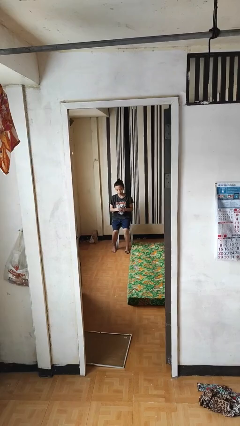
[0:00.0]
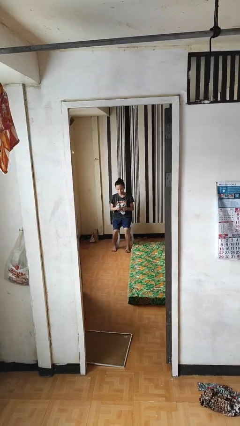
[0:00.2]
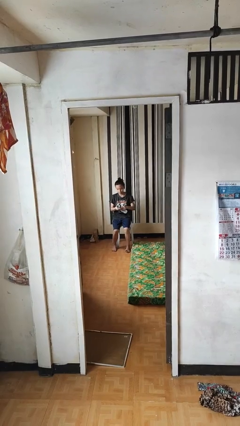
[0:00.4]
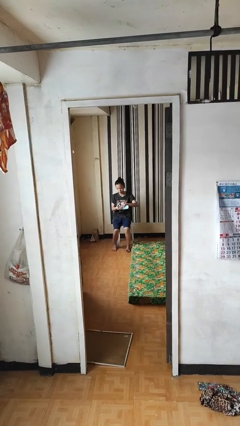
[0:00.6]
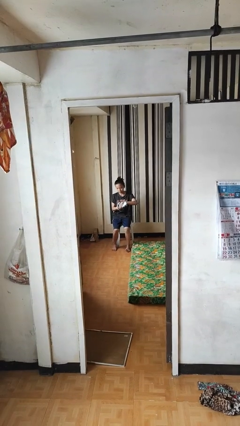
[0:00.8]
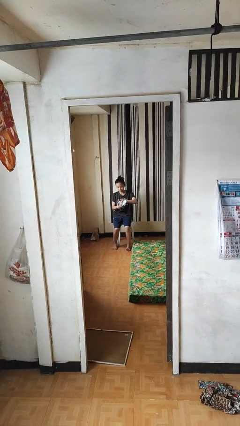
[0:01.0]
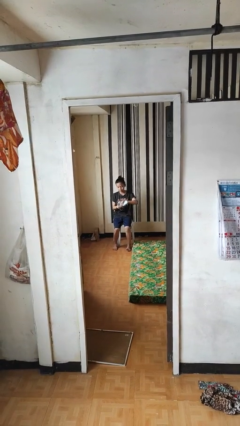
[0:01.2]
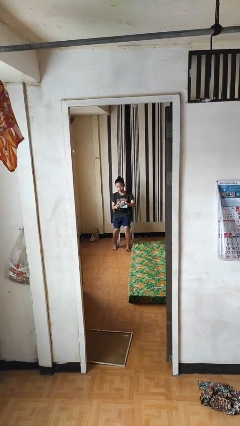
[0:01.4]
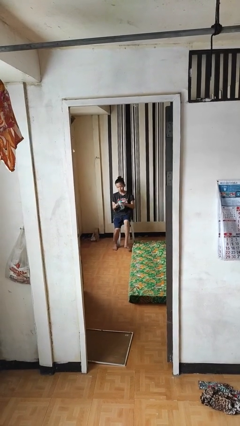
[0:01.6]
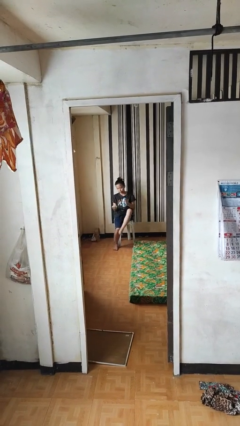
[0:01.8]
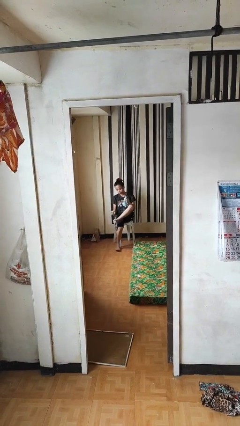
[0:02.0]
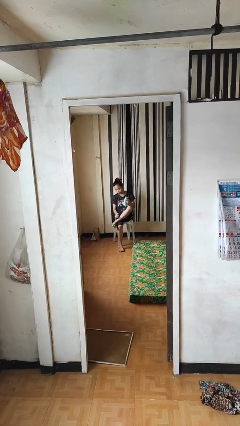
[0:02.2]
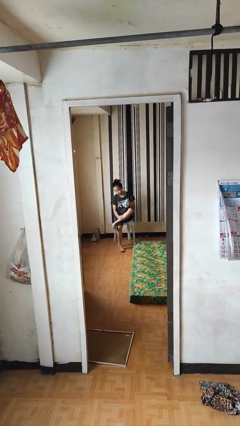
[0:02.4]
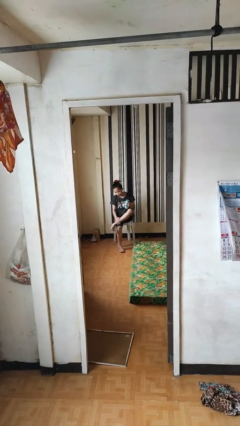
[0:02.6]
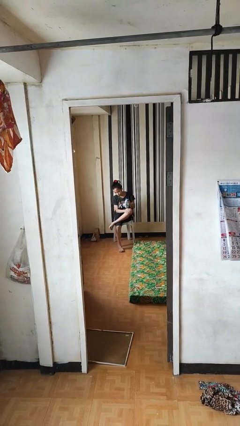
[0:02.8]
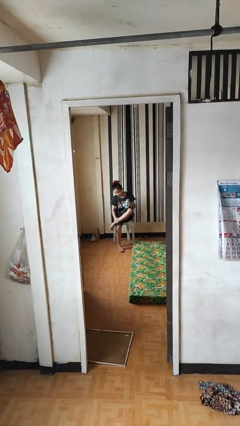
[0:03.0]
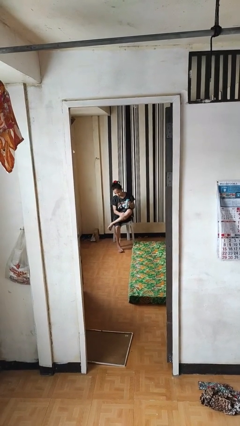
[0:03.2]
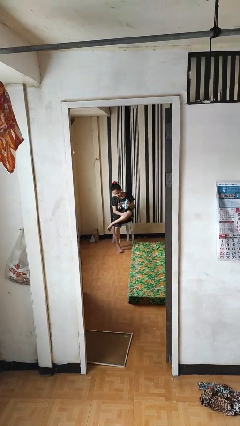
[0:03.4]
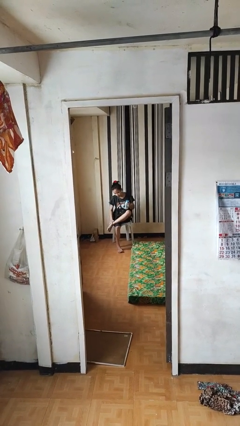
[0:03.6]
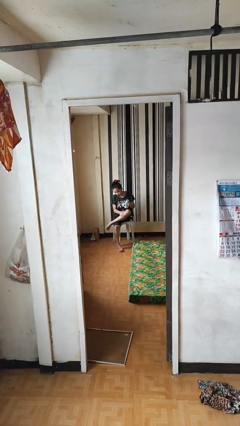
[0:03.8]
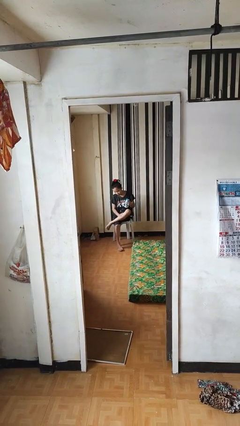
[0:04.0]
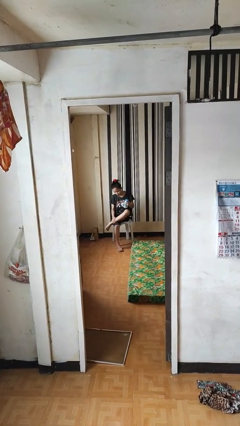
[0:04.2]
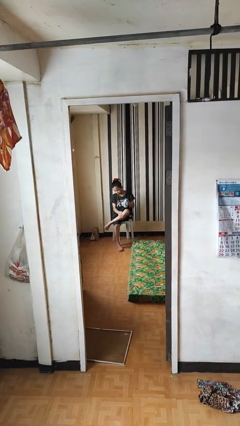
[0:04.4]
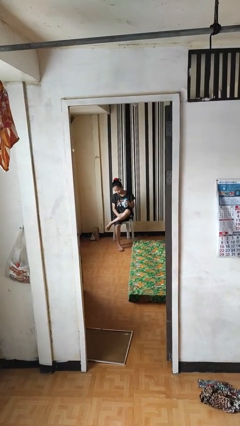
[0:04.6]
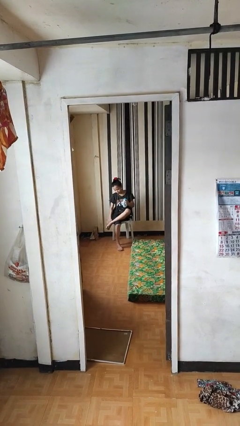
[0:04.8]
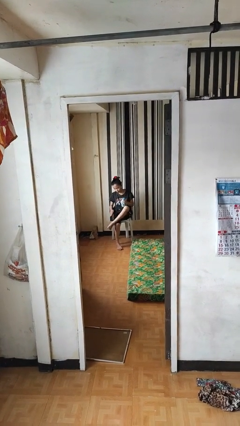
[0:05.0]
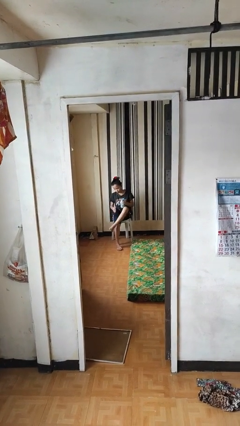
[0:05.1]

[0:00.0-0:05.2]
person applies sunscreen

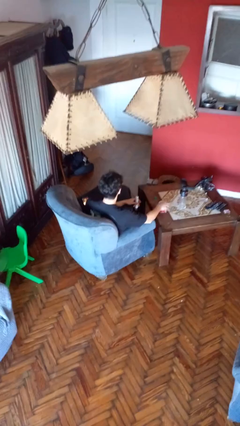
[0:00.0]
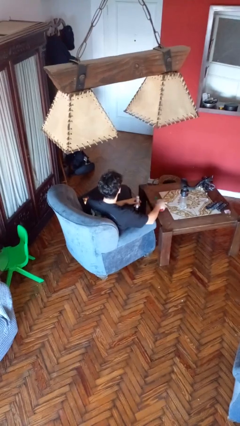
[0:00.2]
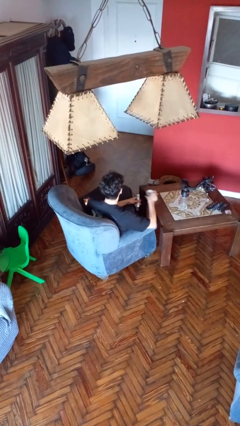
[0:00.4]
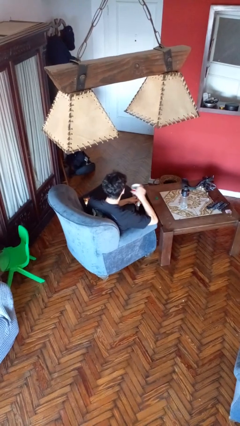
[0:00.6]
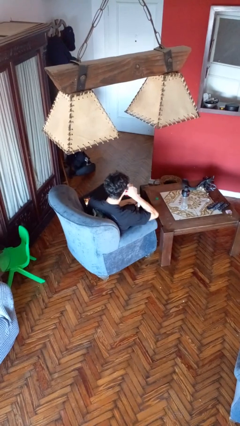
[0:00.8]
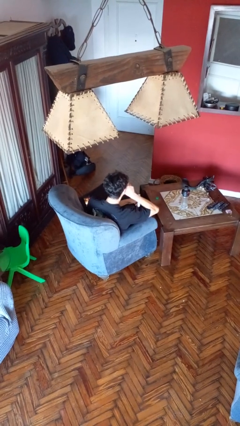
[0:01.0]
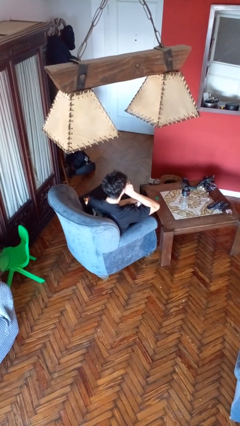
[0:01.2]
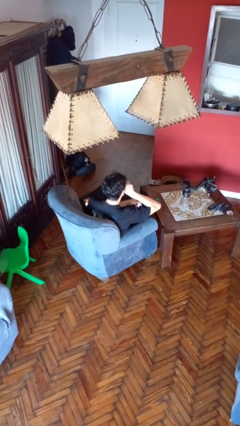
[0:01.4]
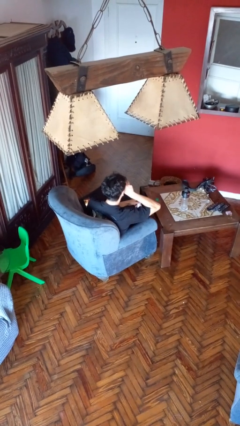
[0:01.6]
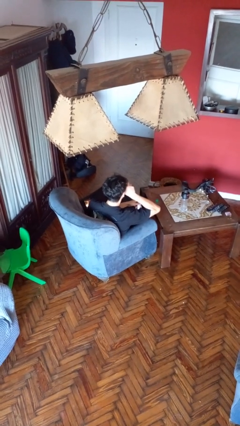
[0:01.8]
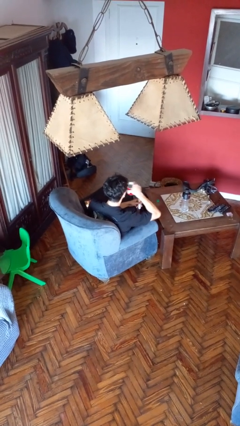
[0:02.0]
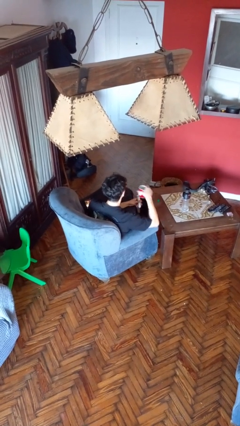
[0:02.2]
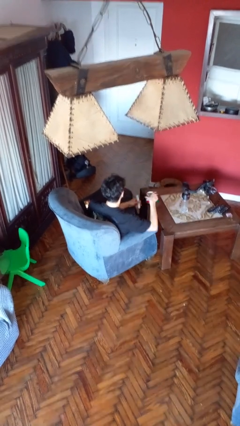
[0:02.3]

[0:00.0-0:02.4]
person drinks from cup

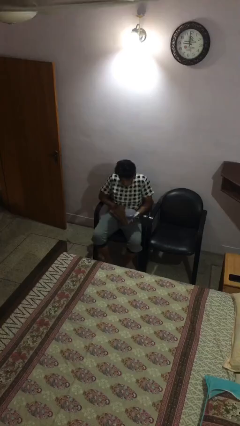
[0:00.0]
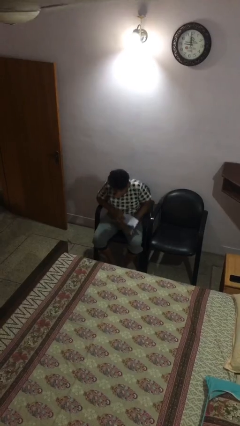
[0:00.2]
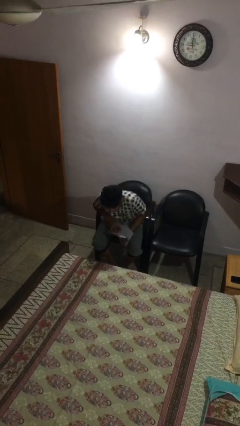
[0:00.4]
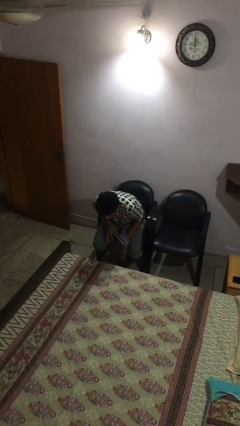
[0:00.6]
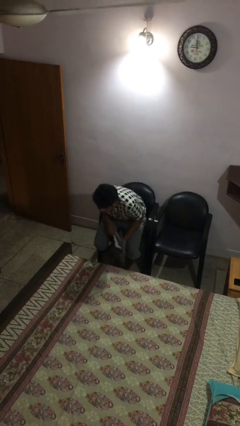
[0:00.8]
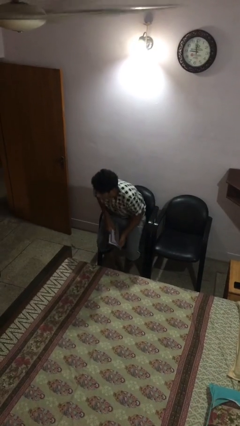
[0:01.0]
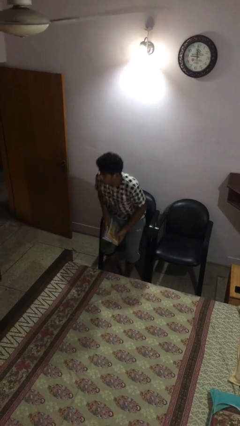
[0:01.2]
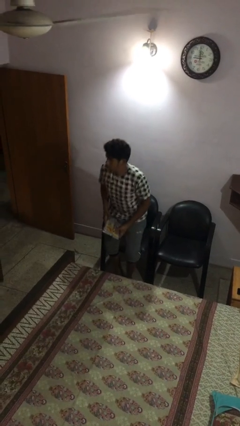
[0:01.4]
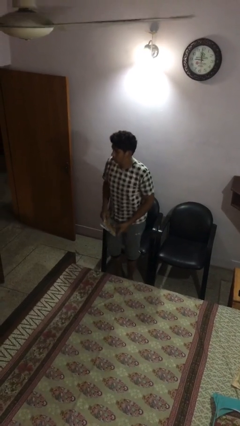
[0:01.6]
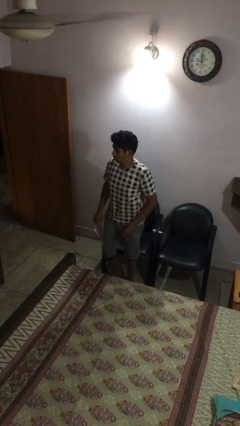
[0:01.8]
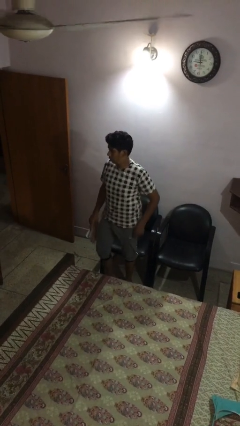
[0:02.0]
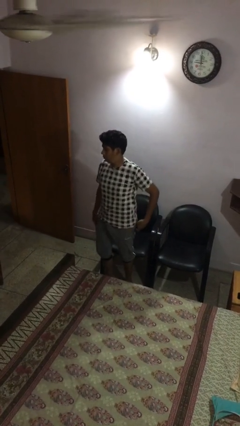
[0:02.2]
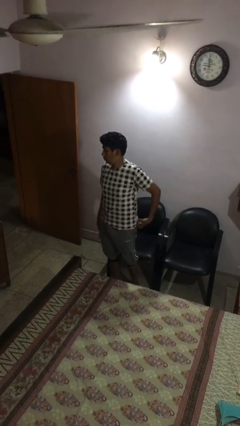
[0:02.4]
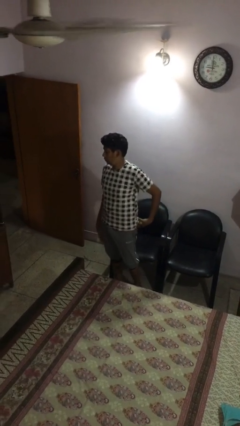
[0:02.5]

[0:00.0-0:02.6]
person stands up

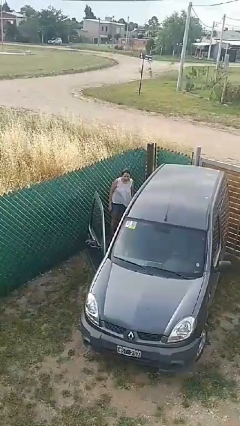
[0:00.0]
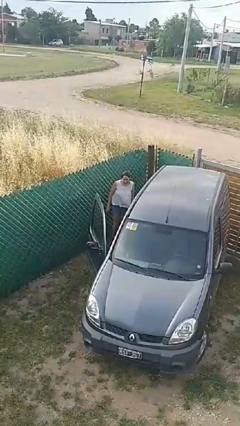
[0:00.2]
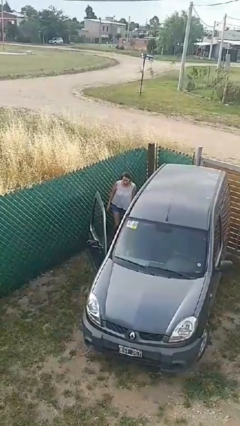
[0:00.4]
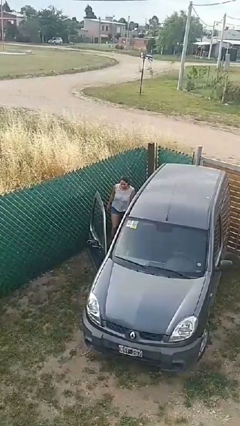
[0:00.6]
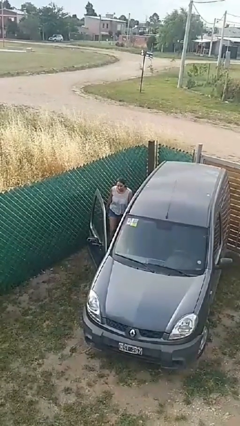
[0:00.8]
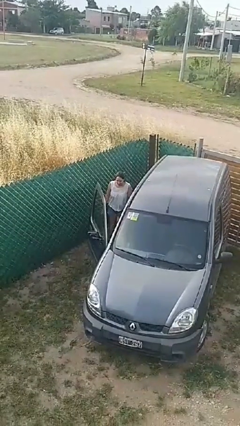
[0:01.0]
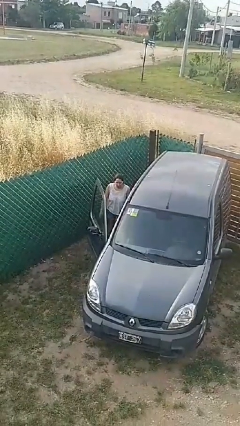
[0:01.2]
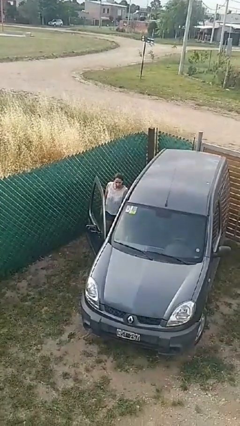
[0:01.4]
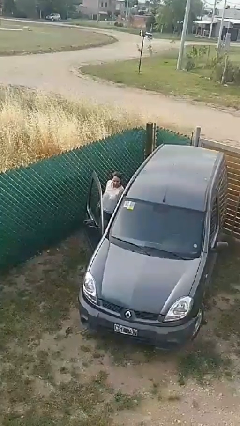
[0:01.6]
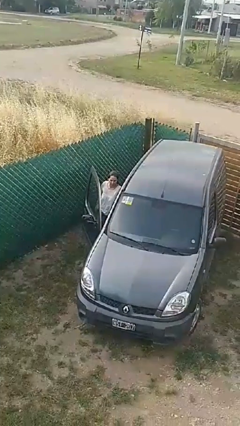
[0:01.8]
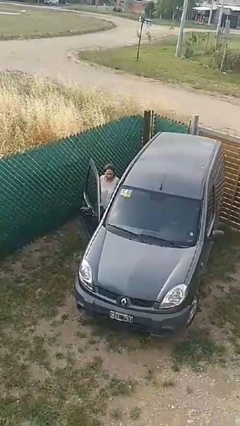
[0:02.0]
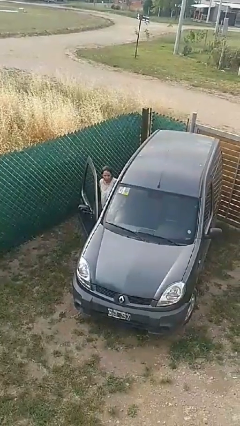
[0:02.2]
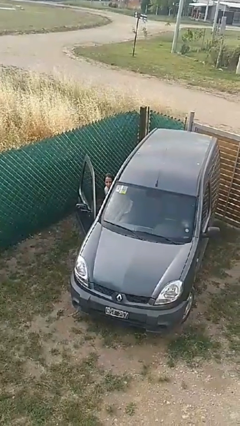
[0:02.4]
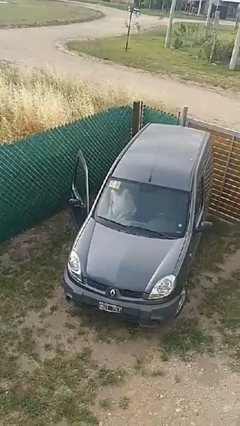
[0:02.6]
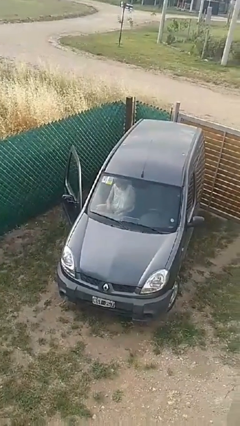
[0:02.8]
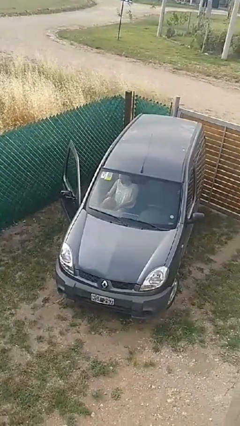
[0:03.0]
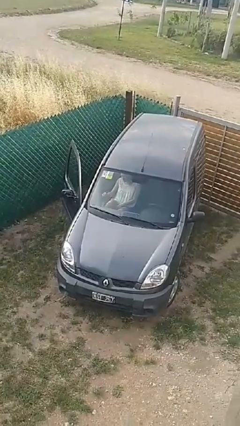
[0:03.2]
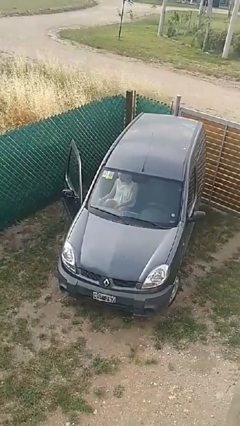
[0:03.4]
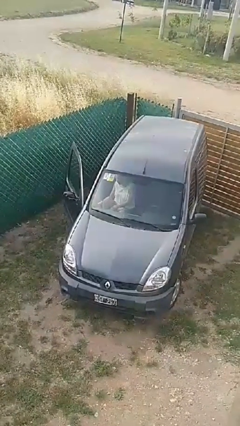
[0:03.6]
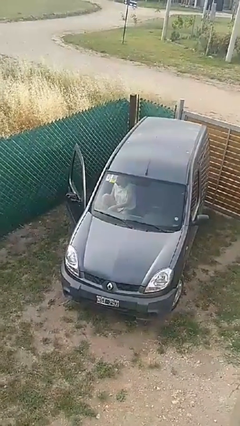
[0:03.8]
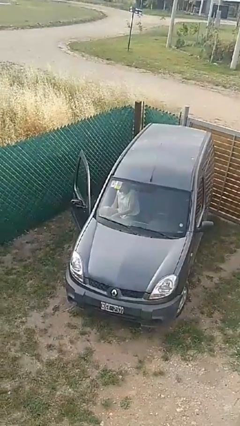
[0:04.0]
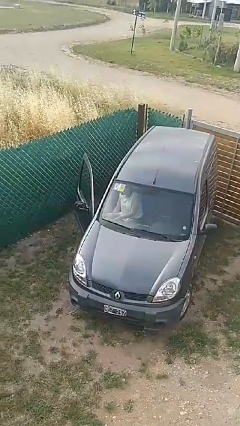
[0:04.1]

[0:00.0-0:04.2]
person enters car

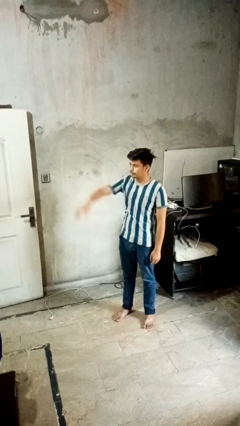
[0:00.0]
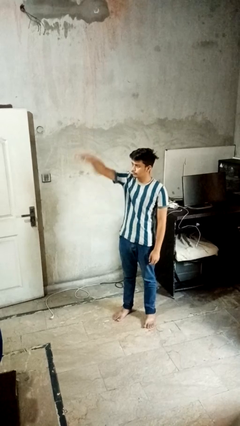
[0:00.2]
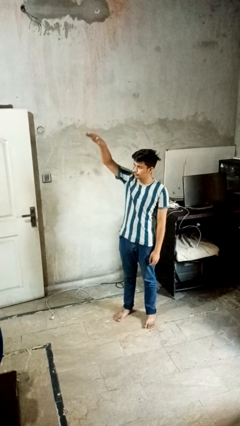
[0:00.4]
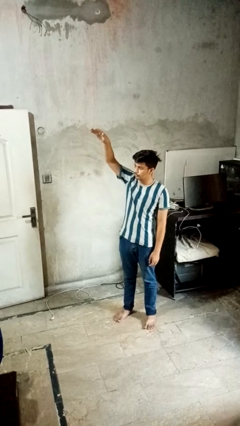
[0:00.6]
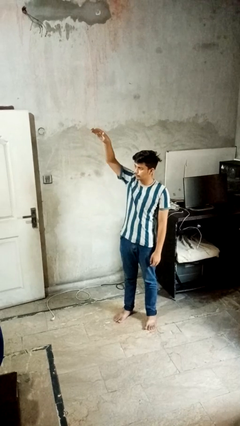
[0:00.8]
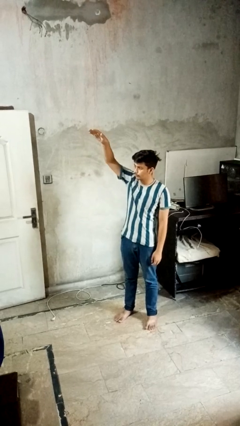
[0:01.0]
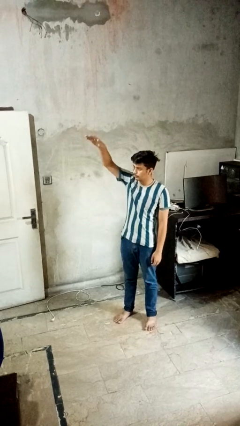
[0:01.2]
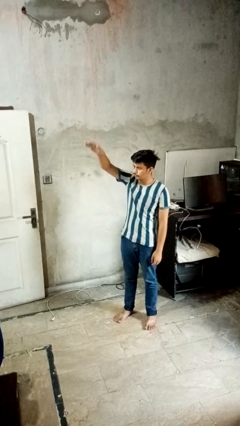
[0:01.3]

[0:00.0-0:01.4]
person gestures swipe up

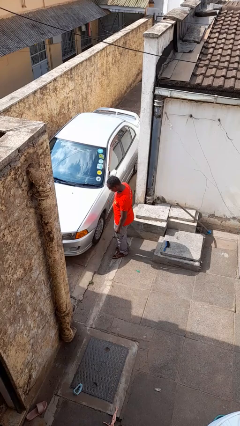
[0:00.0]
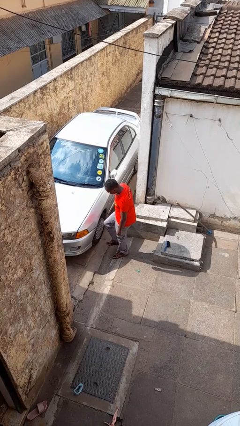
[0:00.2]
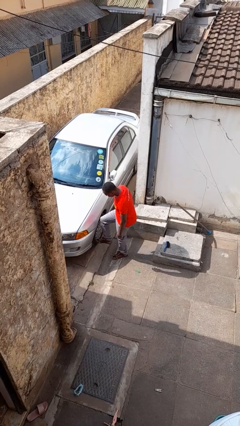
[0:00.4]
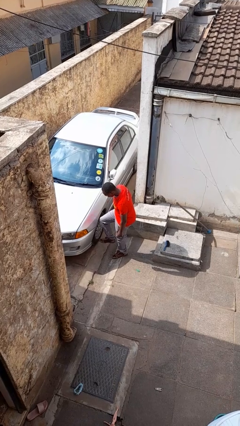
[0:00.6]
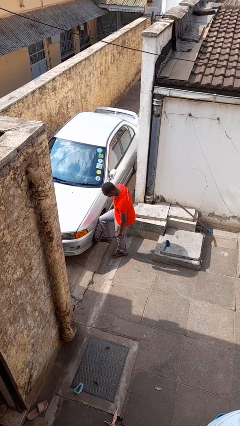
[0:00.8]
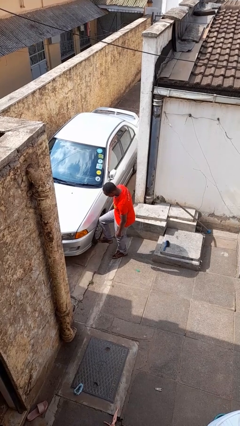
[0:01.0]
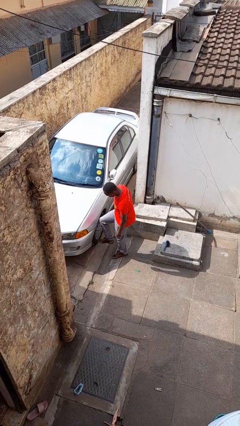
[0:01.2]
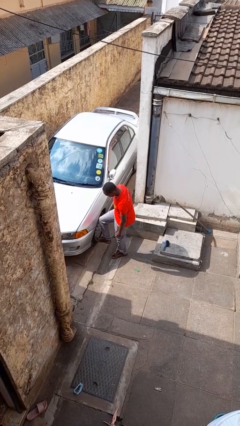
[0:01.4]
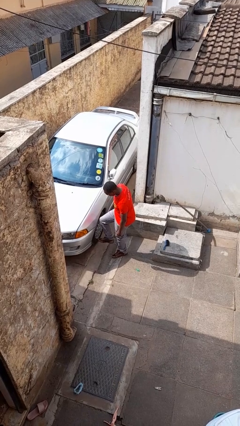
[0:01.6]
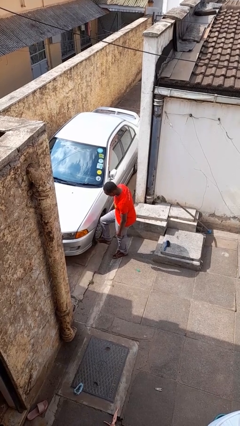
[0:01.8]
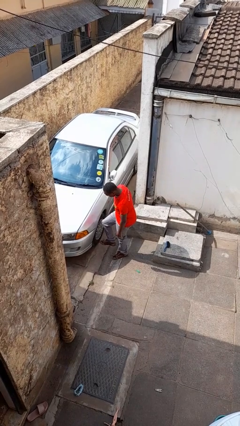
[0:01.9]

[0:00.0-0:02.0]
person kicks car tires
